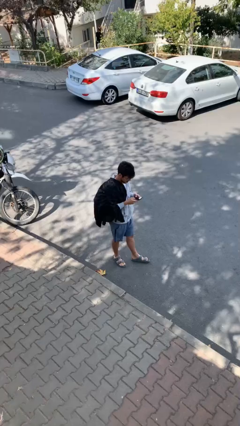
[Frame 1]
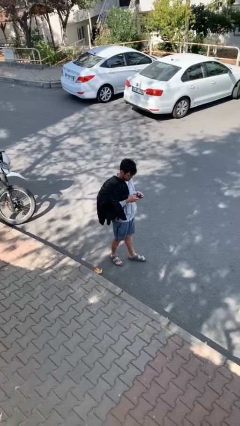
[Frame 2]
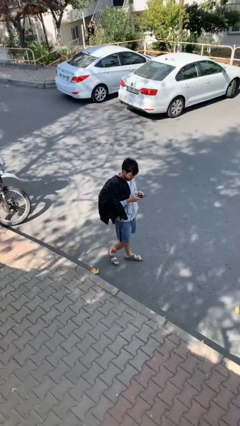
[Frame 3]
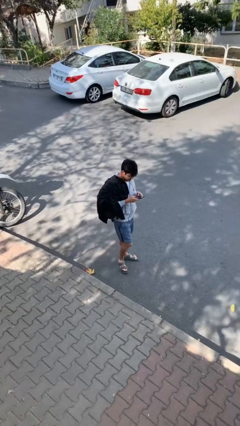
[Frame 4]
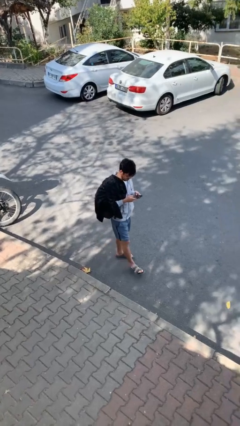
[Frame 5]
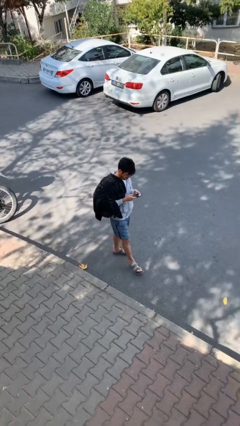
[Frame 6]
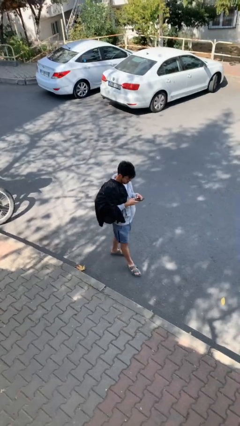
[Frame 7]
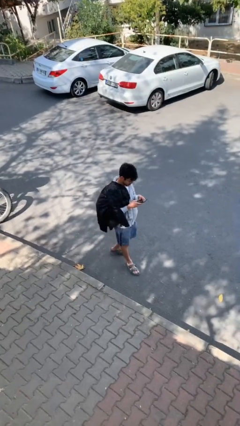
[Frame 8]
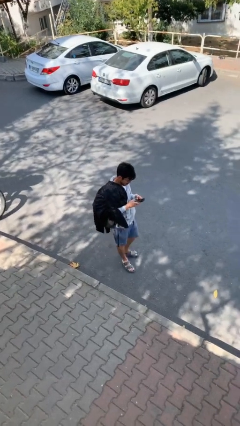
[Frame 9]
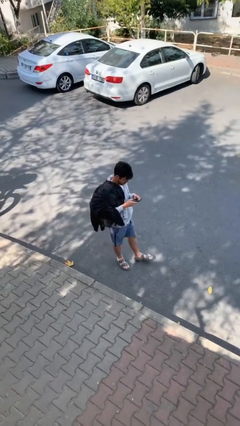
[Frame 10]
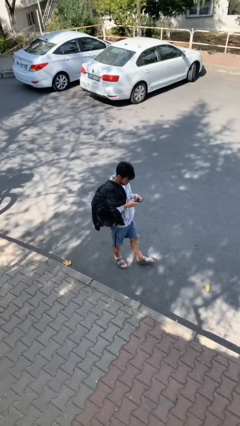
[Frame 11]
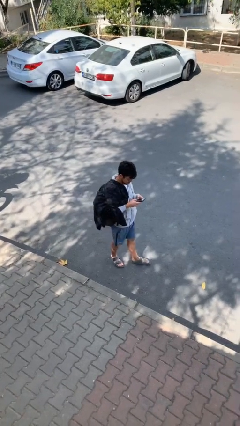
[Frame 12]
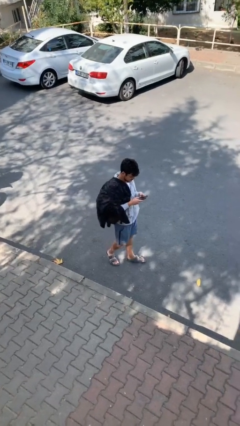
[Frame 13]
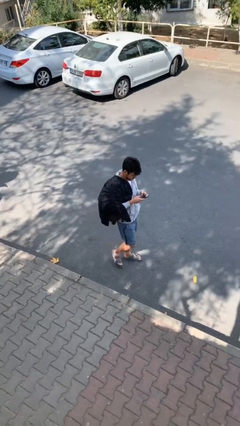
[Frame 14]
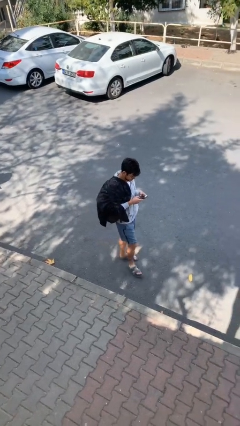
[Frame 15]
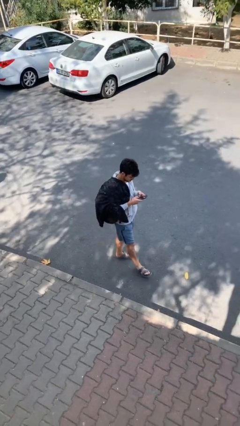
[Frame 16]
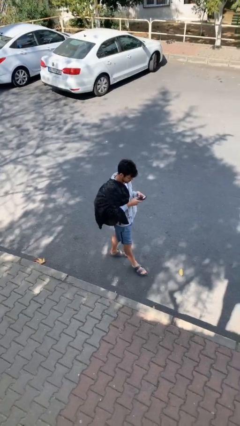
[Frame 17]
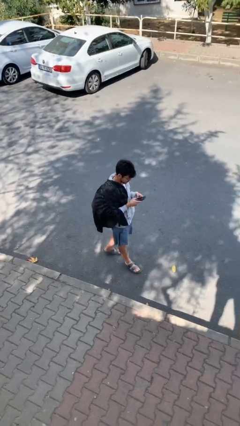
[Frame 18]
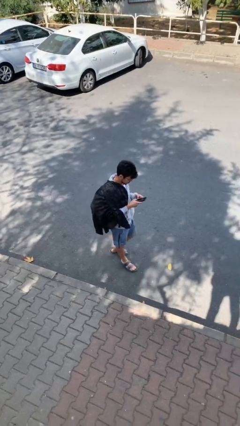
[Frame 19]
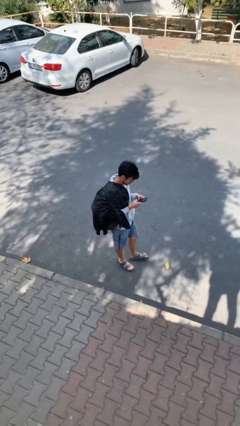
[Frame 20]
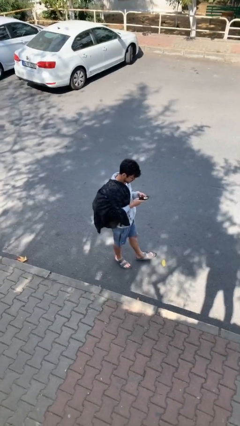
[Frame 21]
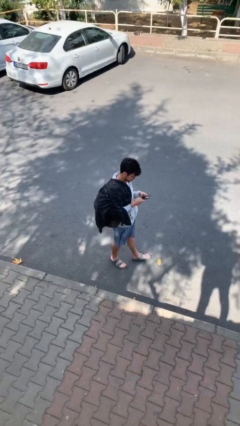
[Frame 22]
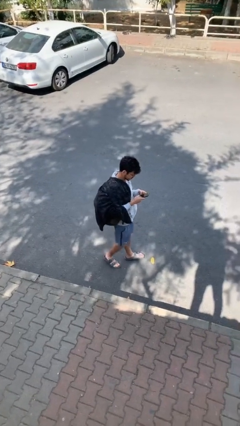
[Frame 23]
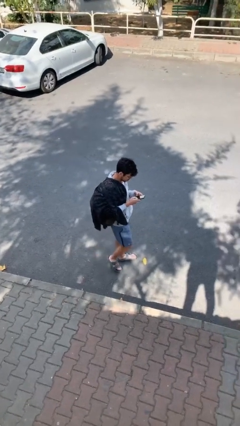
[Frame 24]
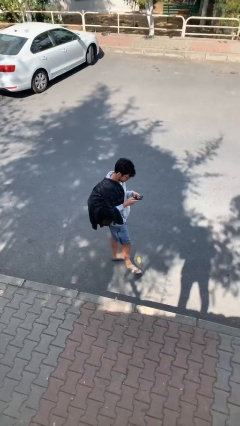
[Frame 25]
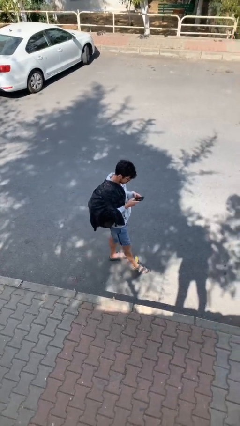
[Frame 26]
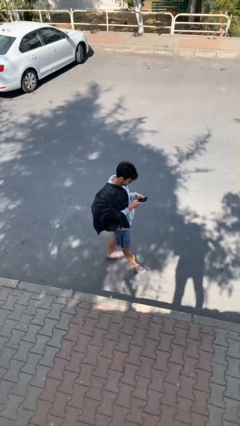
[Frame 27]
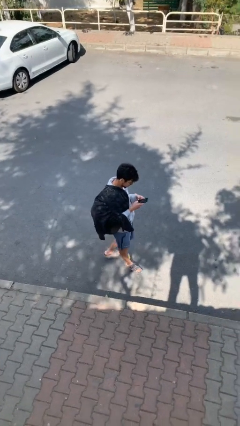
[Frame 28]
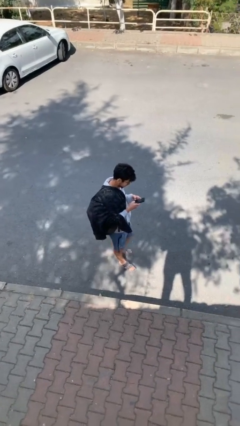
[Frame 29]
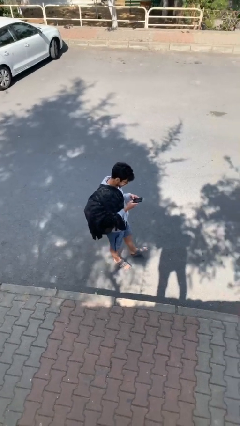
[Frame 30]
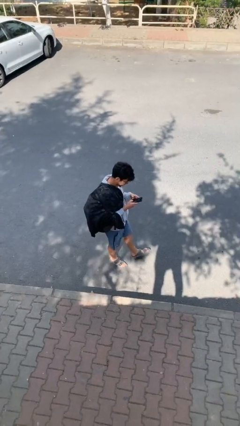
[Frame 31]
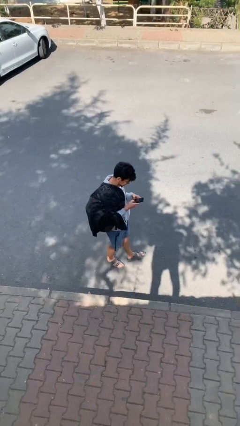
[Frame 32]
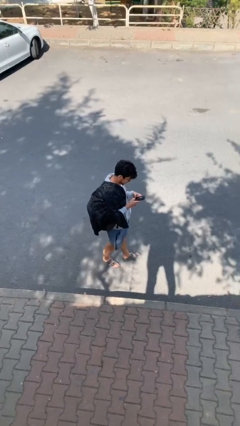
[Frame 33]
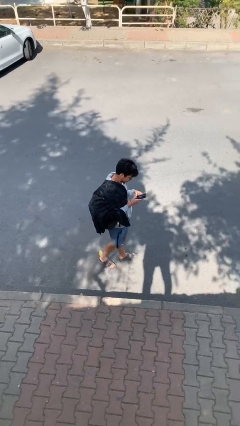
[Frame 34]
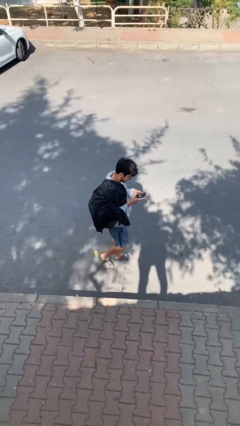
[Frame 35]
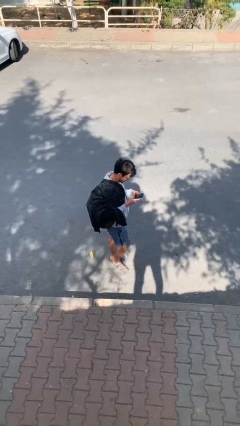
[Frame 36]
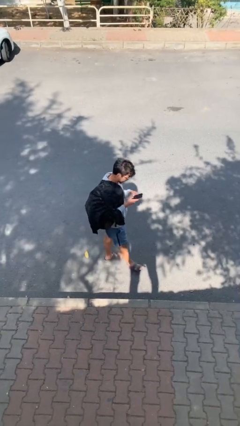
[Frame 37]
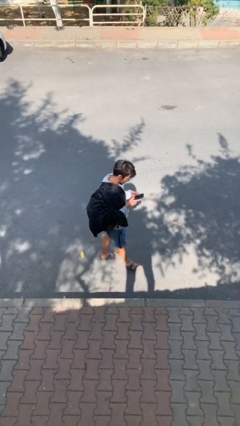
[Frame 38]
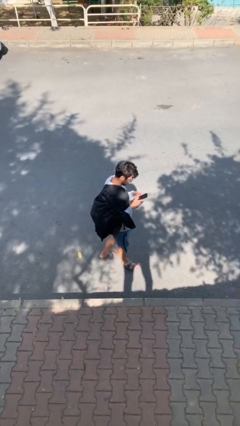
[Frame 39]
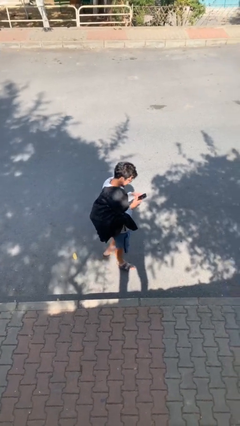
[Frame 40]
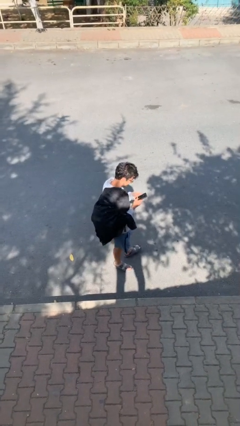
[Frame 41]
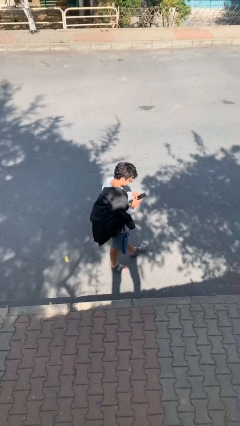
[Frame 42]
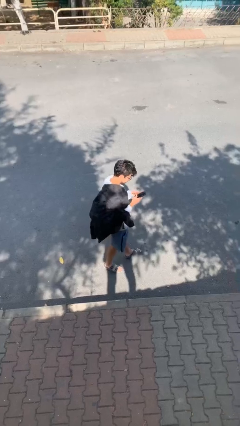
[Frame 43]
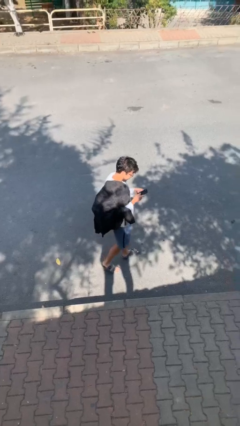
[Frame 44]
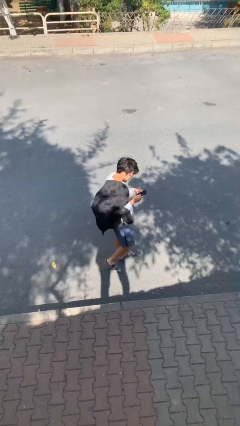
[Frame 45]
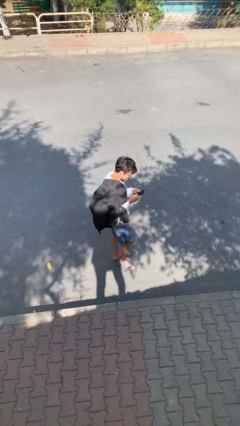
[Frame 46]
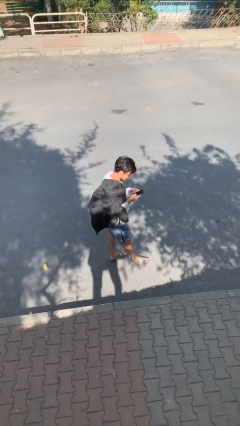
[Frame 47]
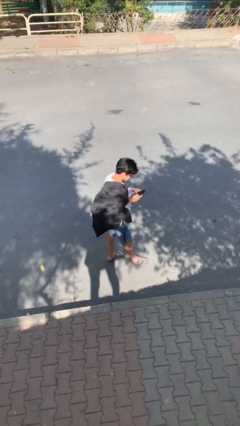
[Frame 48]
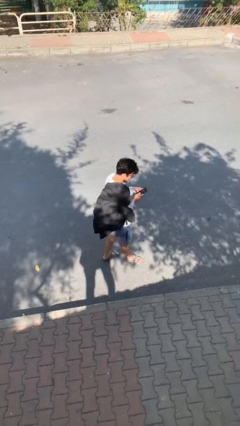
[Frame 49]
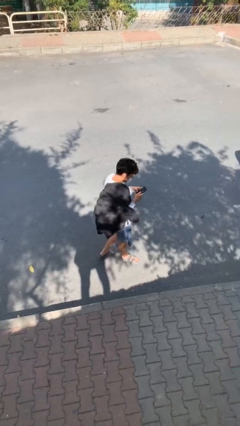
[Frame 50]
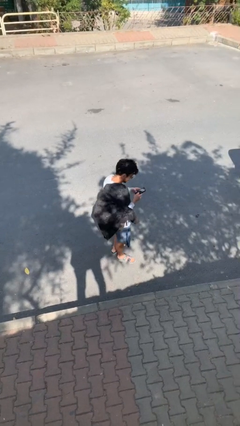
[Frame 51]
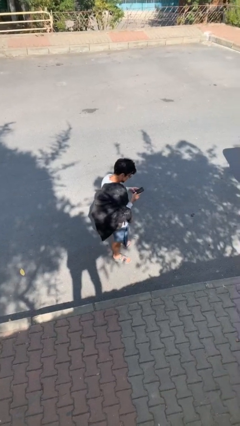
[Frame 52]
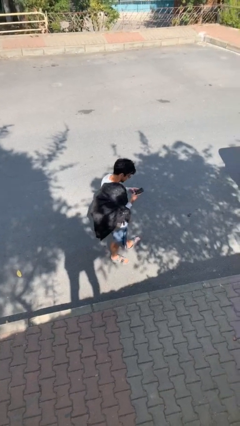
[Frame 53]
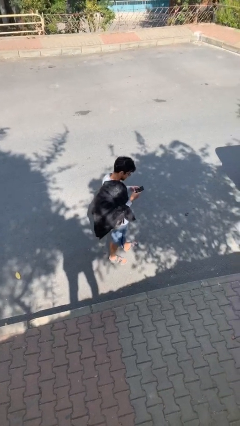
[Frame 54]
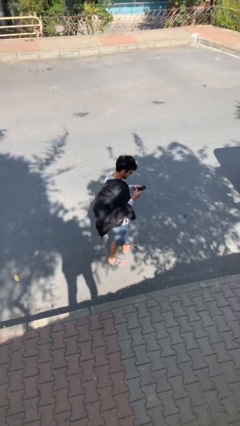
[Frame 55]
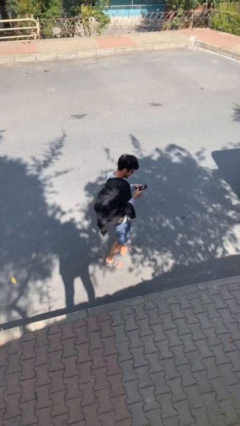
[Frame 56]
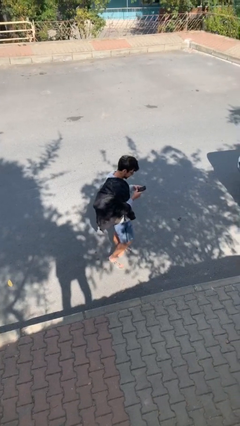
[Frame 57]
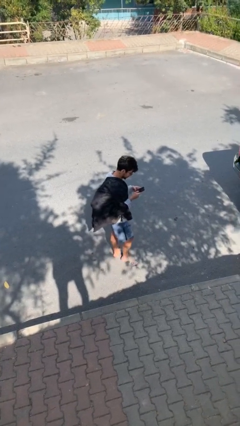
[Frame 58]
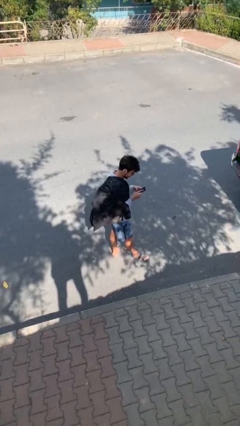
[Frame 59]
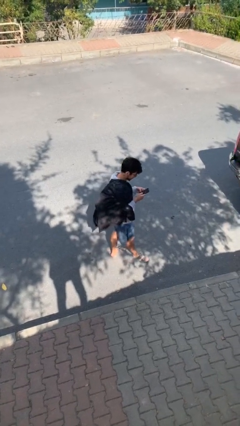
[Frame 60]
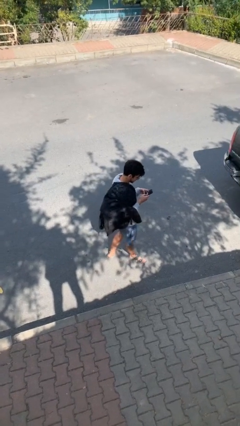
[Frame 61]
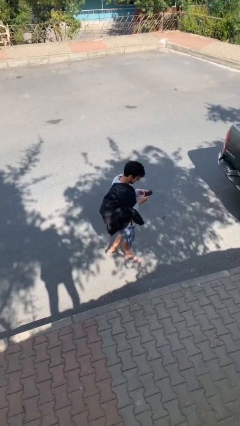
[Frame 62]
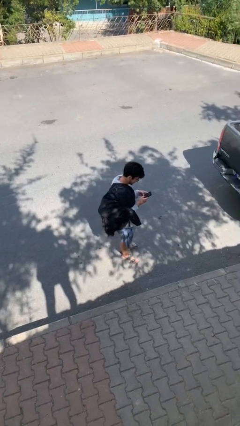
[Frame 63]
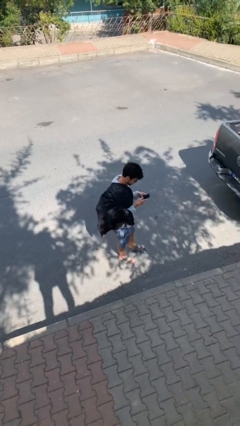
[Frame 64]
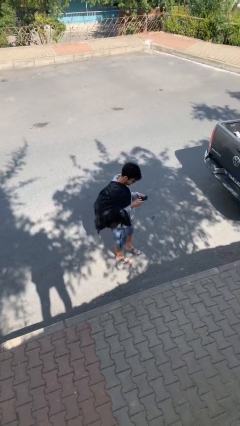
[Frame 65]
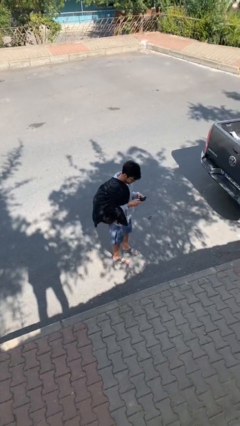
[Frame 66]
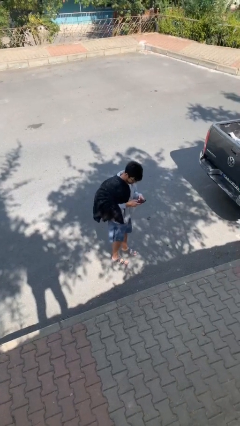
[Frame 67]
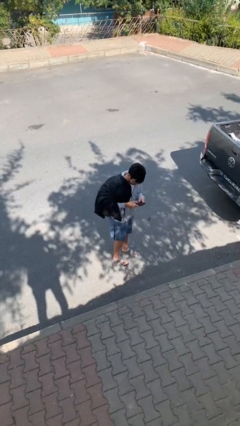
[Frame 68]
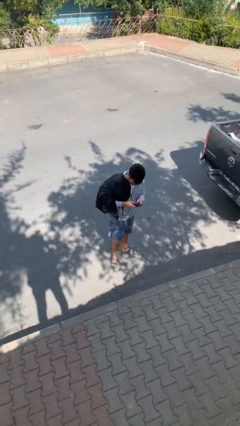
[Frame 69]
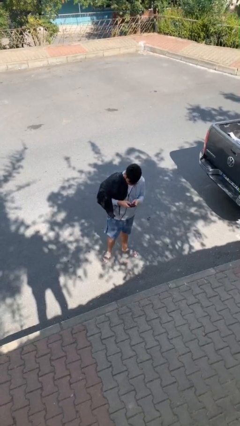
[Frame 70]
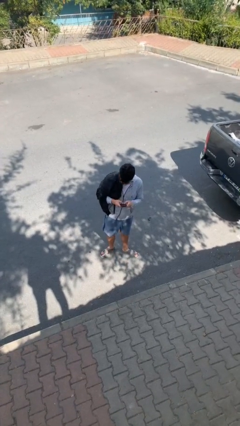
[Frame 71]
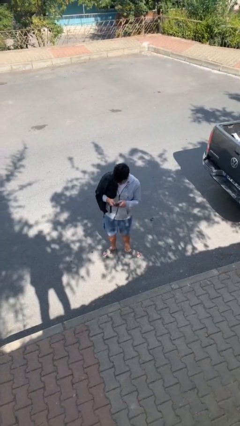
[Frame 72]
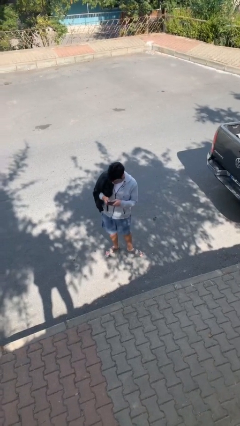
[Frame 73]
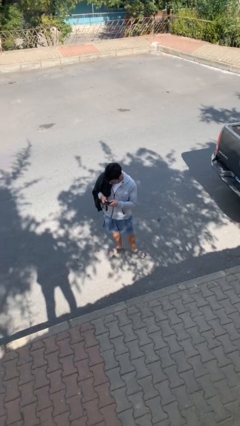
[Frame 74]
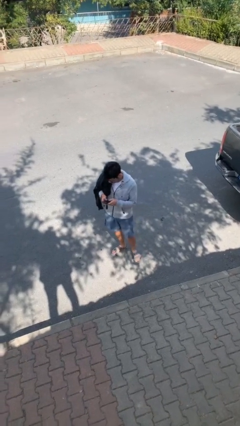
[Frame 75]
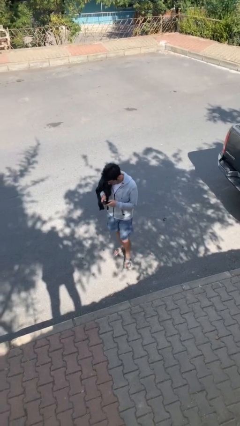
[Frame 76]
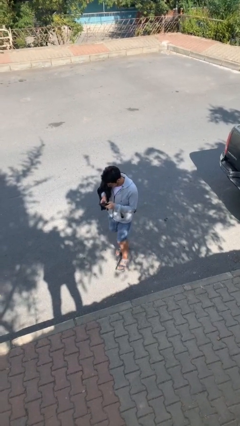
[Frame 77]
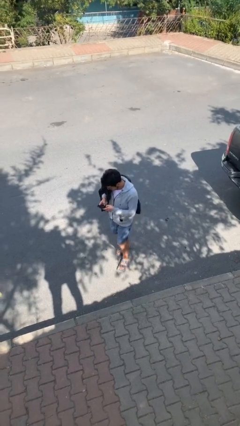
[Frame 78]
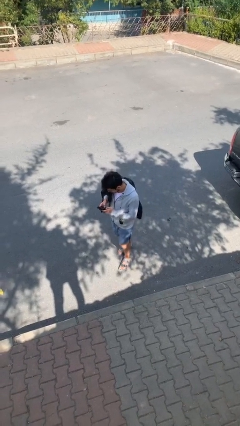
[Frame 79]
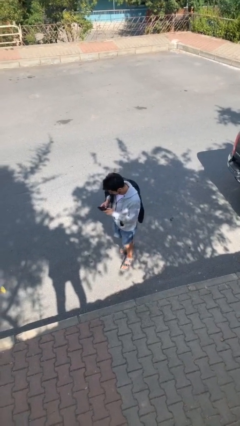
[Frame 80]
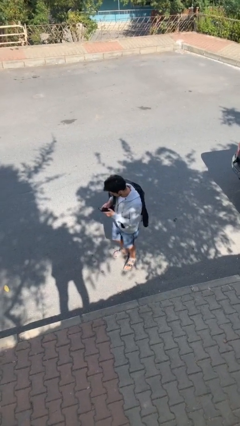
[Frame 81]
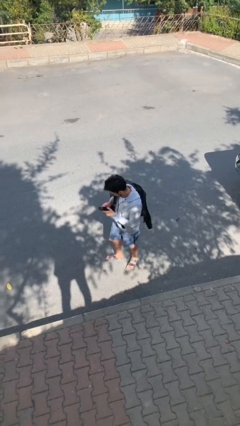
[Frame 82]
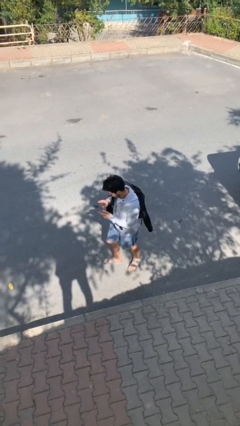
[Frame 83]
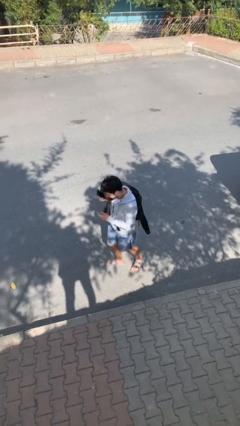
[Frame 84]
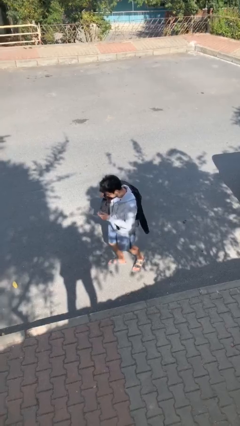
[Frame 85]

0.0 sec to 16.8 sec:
person texts on phone

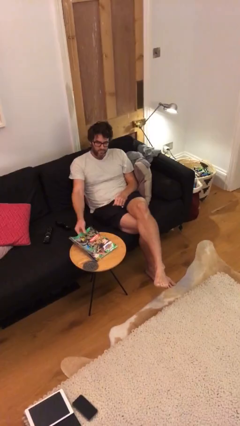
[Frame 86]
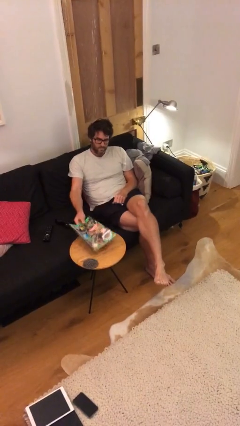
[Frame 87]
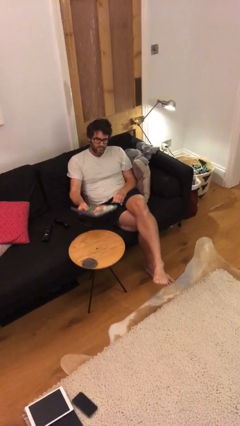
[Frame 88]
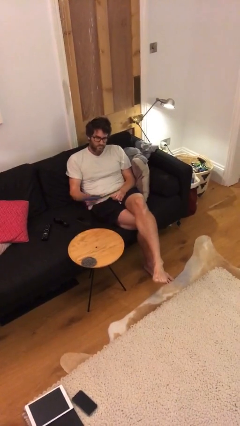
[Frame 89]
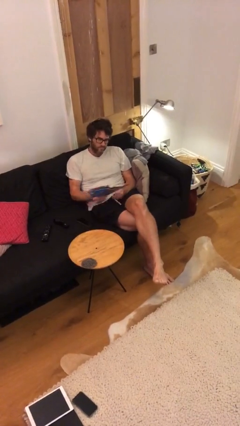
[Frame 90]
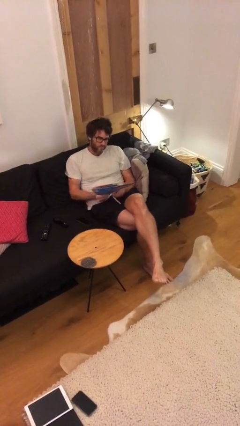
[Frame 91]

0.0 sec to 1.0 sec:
person picks up object from table

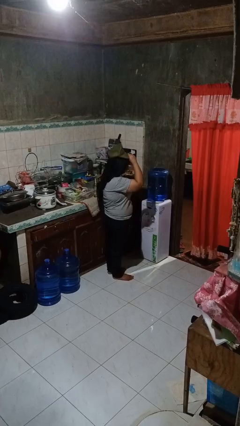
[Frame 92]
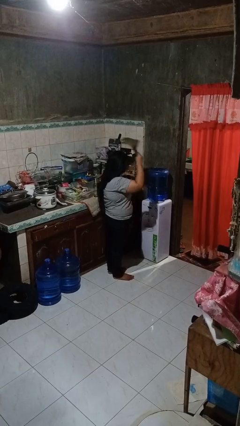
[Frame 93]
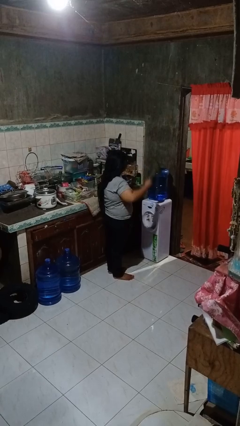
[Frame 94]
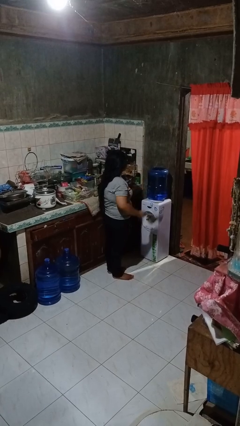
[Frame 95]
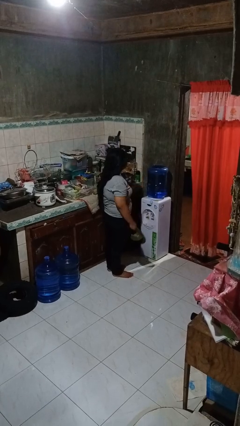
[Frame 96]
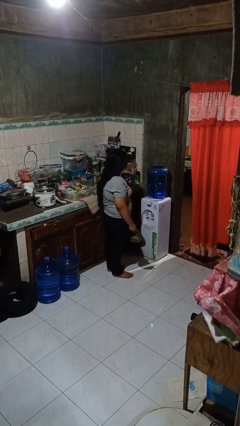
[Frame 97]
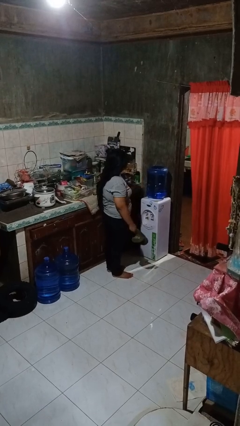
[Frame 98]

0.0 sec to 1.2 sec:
person takes off hat
